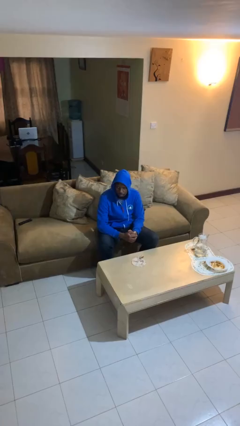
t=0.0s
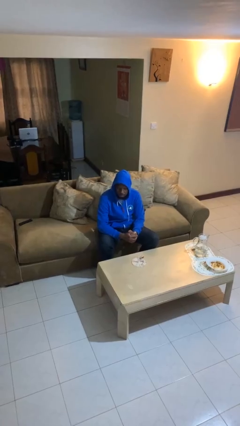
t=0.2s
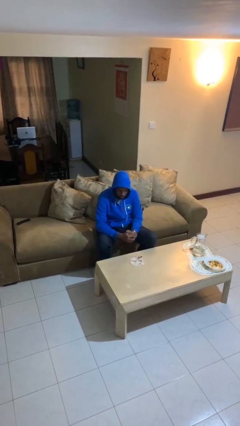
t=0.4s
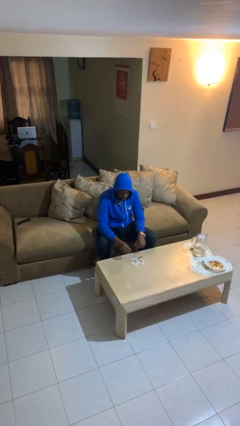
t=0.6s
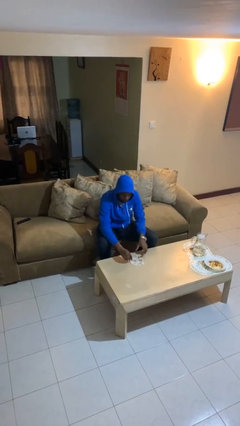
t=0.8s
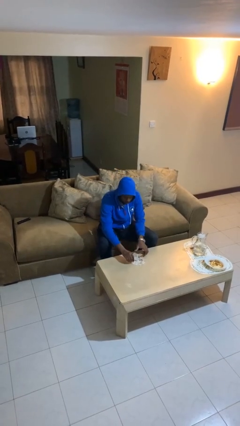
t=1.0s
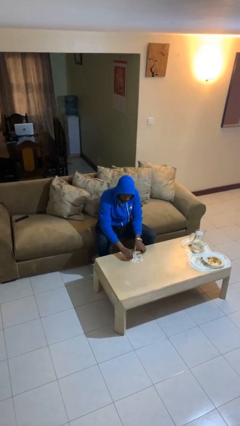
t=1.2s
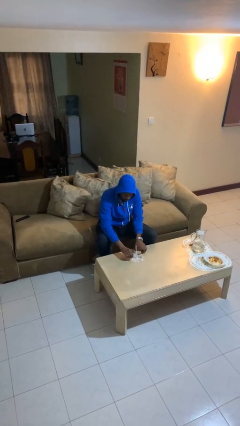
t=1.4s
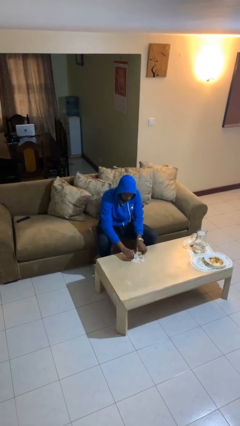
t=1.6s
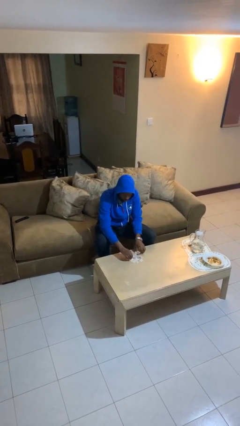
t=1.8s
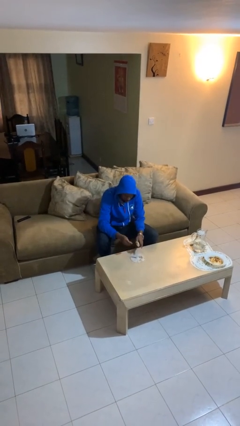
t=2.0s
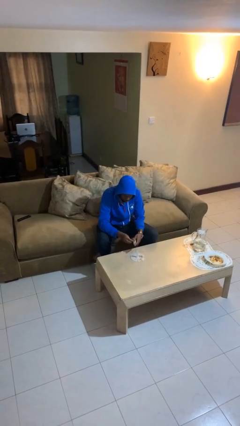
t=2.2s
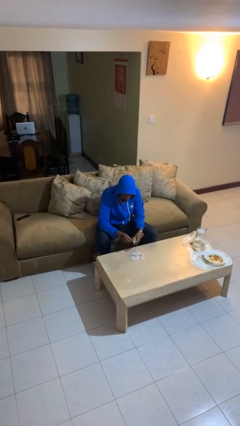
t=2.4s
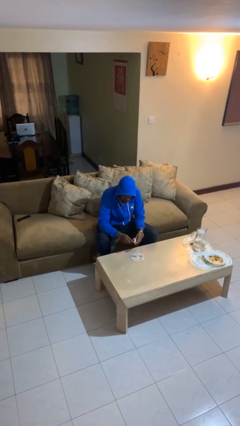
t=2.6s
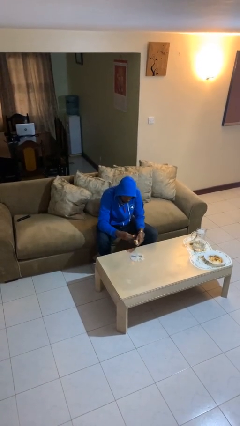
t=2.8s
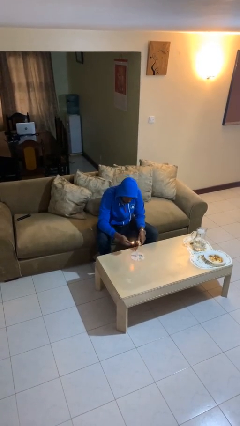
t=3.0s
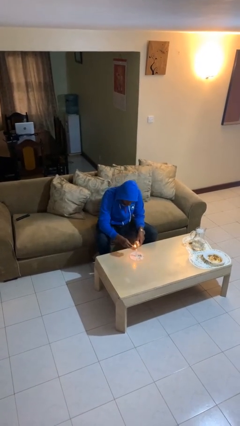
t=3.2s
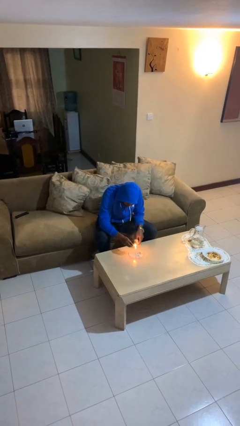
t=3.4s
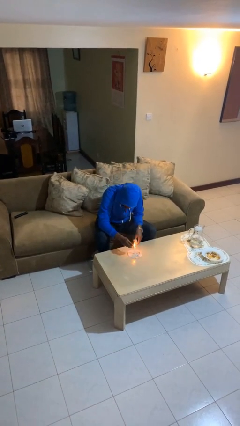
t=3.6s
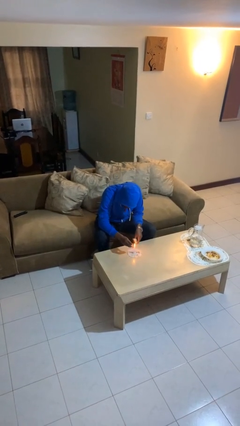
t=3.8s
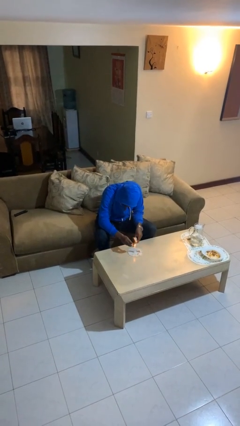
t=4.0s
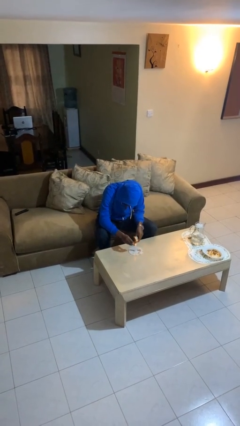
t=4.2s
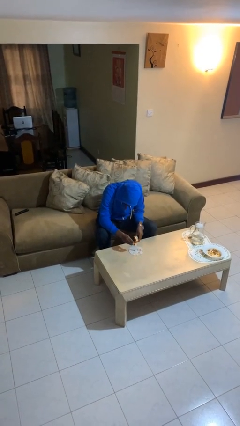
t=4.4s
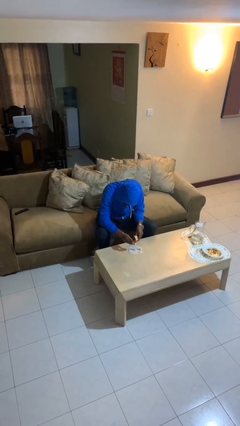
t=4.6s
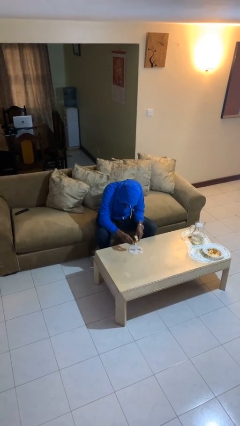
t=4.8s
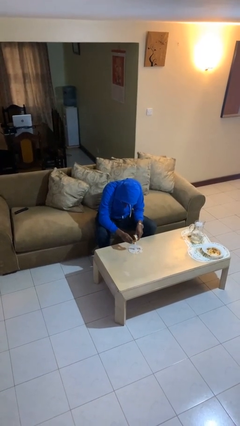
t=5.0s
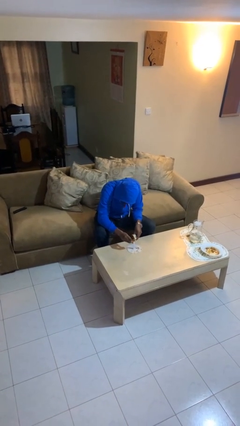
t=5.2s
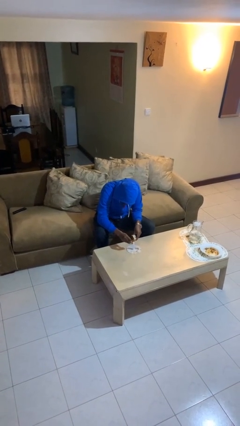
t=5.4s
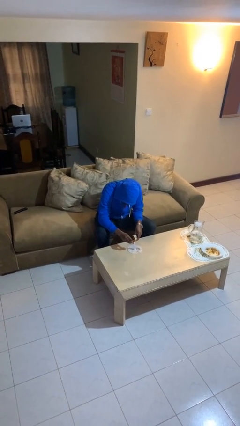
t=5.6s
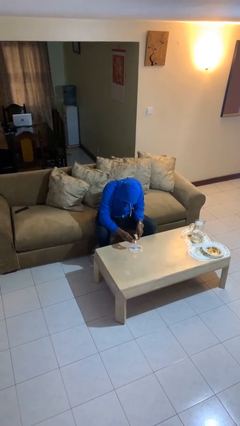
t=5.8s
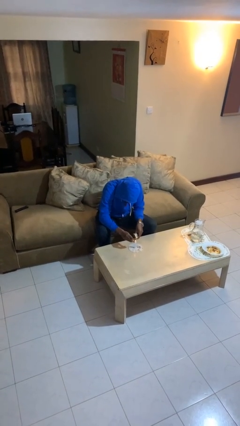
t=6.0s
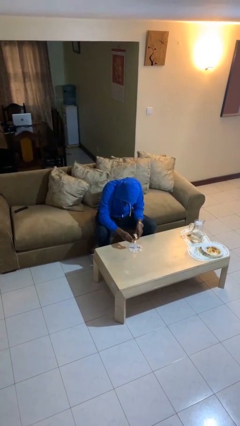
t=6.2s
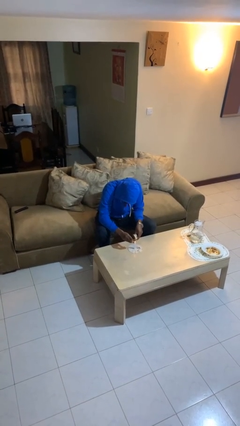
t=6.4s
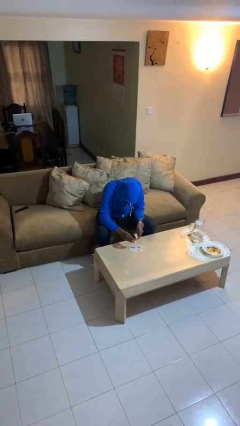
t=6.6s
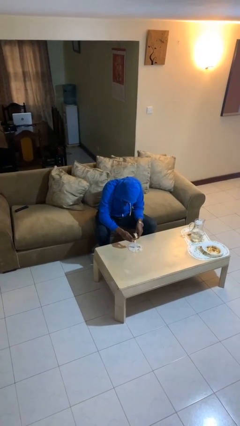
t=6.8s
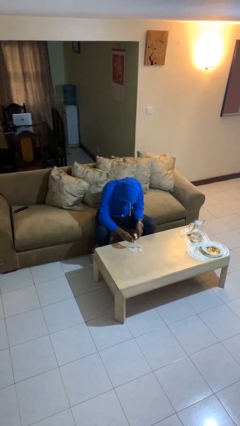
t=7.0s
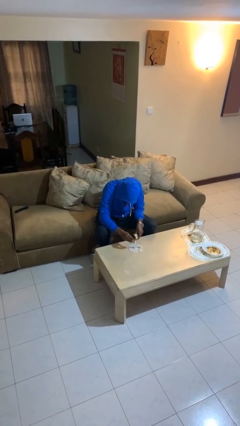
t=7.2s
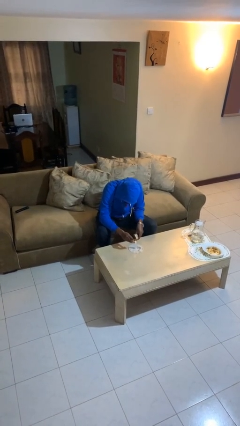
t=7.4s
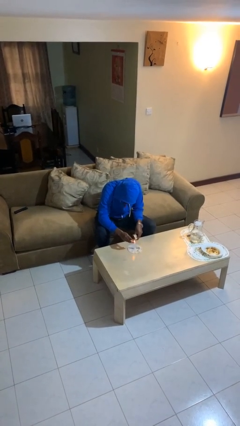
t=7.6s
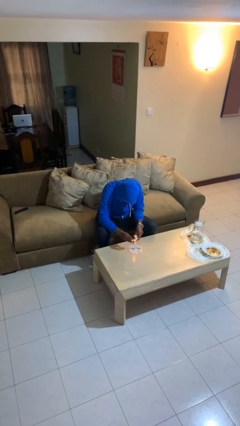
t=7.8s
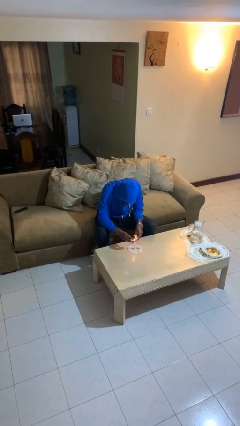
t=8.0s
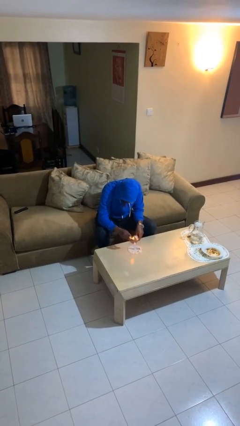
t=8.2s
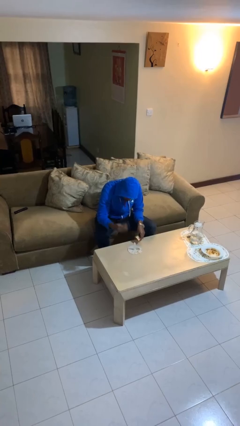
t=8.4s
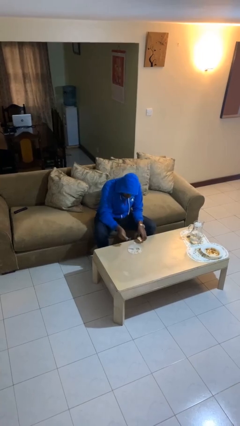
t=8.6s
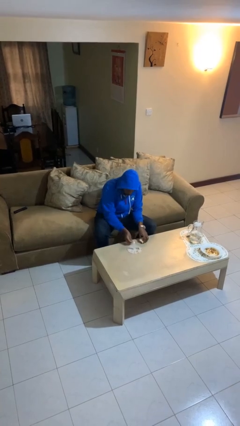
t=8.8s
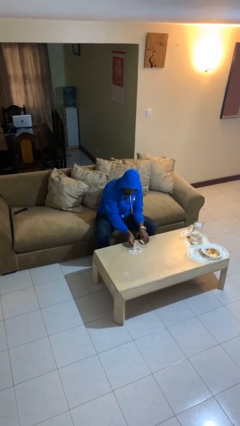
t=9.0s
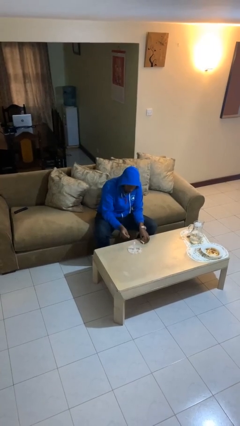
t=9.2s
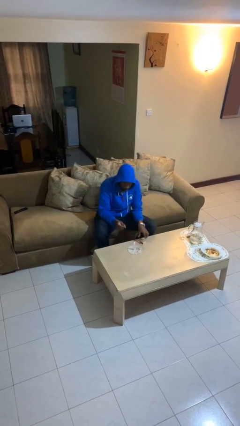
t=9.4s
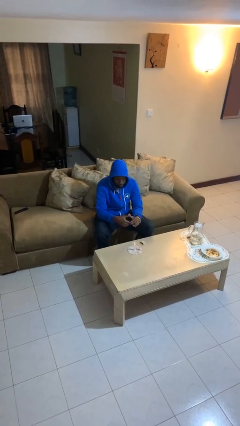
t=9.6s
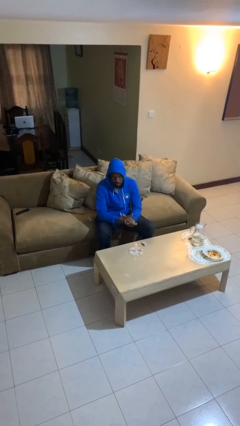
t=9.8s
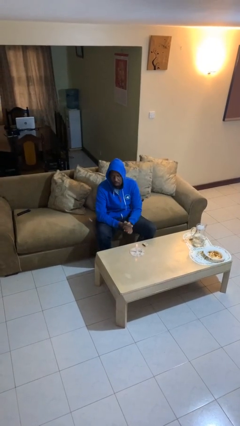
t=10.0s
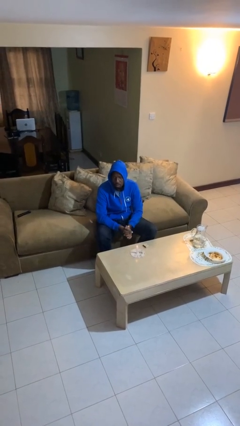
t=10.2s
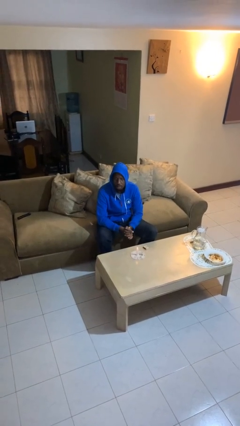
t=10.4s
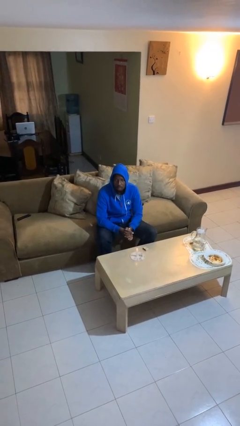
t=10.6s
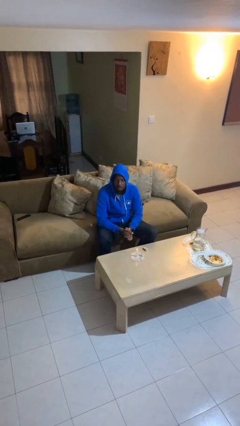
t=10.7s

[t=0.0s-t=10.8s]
person lights candle

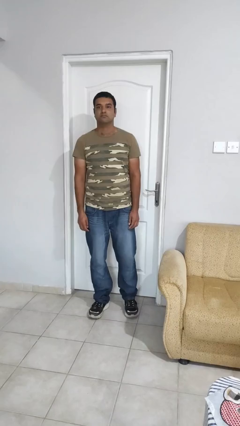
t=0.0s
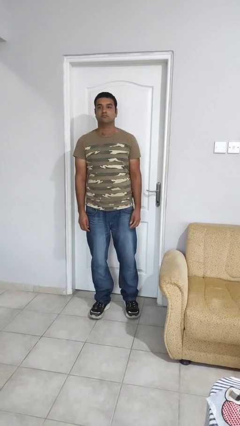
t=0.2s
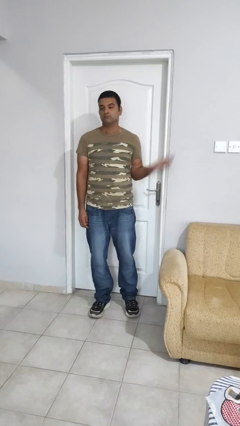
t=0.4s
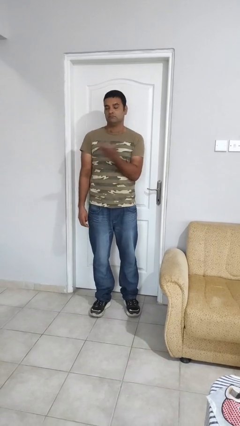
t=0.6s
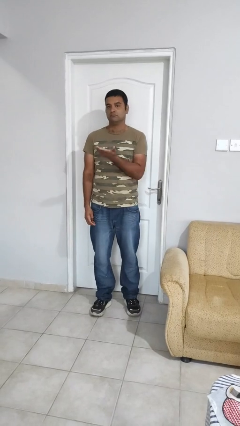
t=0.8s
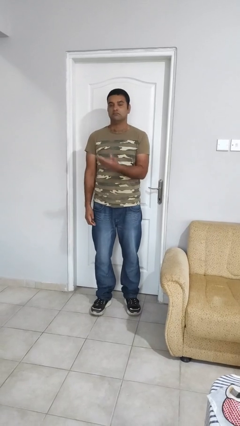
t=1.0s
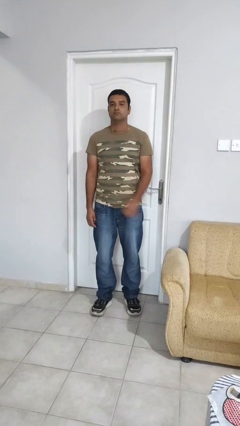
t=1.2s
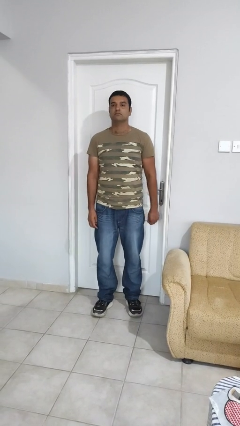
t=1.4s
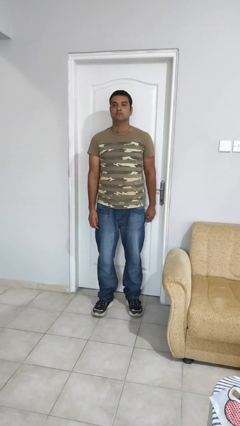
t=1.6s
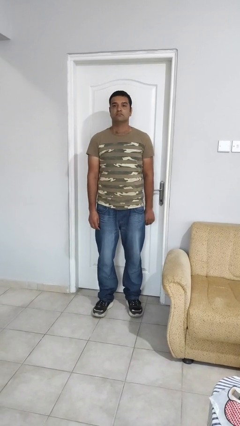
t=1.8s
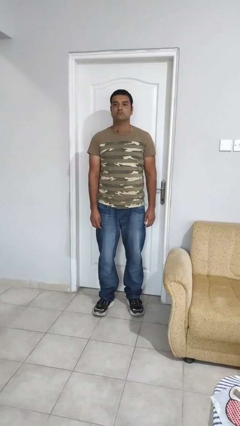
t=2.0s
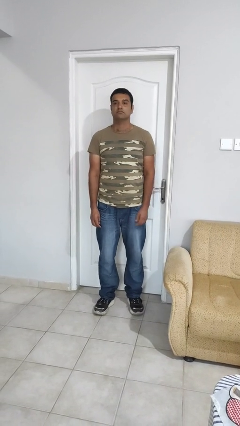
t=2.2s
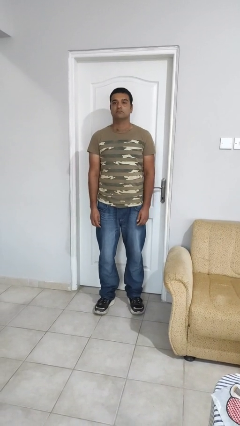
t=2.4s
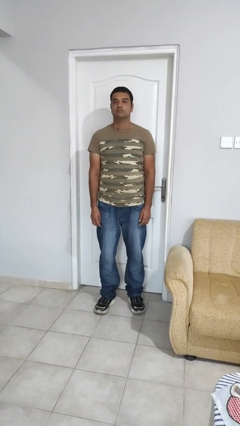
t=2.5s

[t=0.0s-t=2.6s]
person karate chop

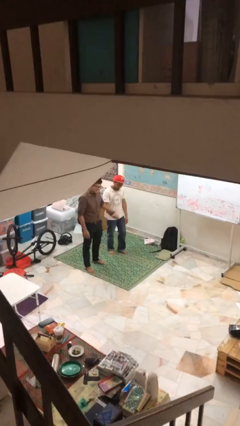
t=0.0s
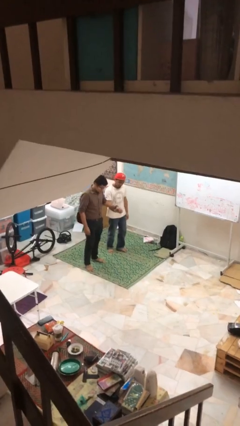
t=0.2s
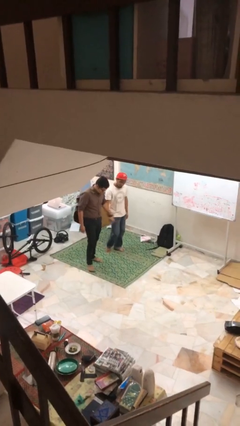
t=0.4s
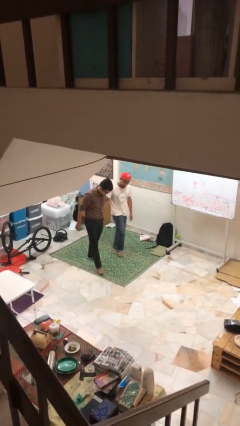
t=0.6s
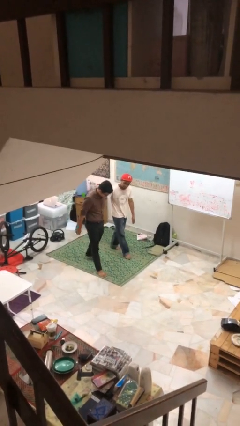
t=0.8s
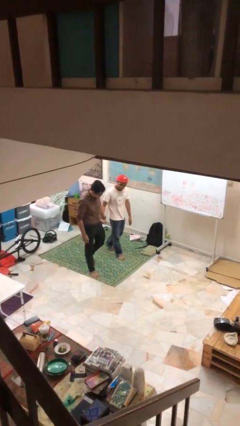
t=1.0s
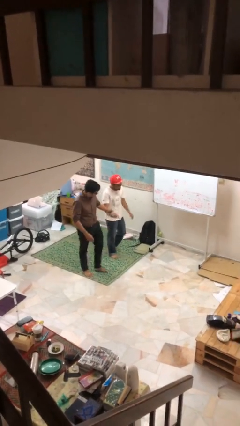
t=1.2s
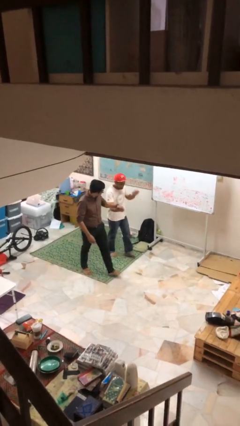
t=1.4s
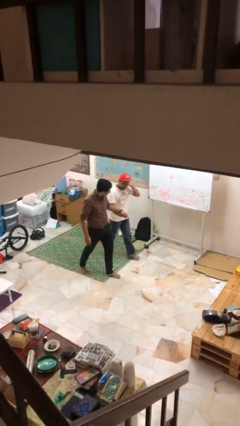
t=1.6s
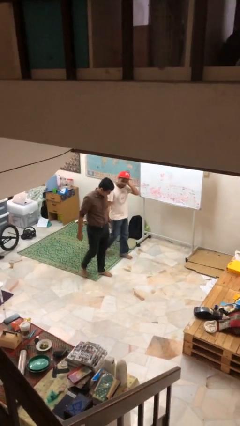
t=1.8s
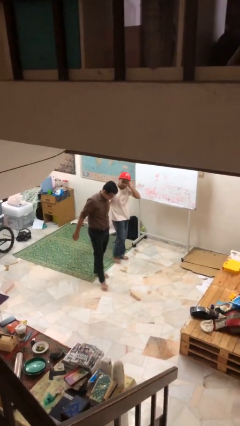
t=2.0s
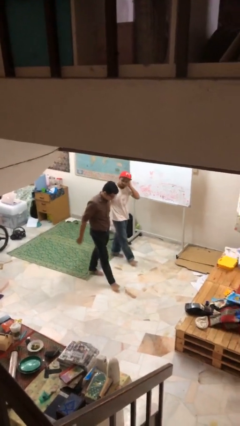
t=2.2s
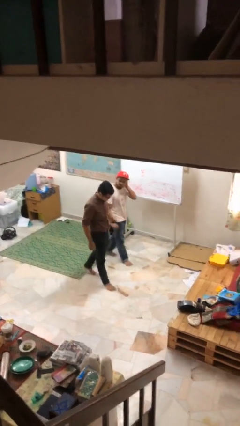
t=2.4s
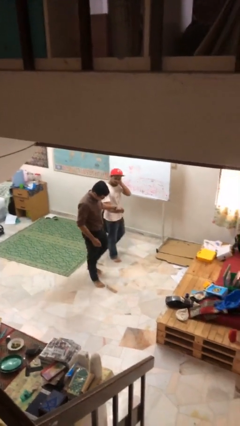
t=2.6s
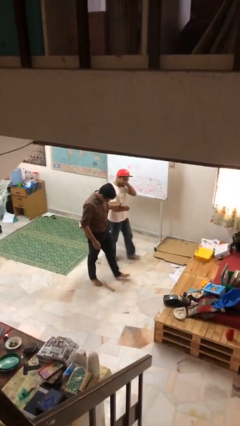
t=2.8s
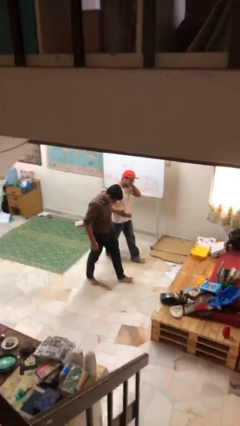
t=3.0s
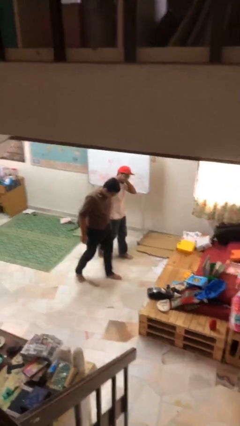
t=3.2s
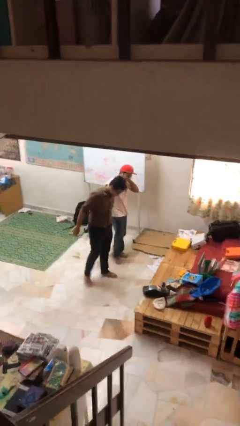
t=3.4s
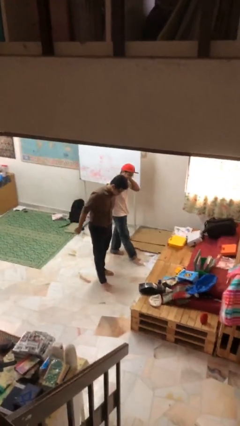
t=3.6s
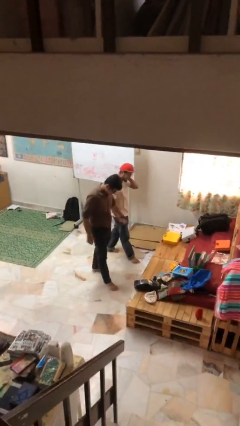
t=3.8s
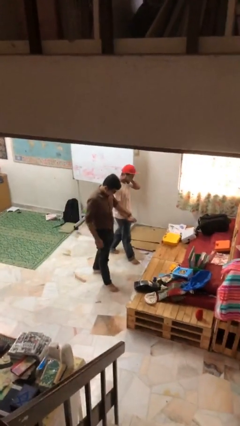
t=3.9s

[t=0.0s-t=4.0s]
person holds hand

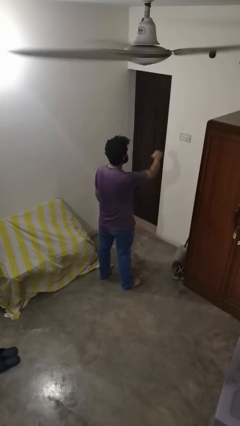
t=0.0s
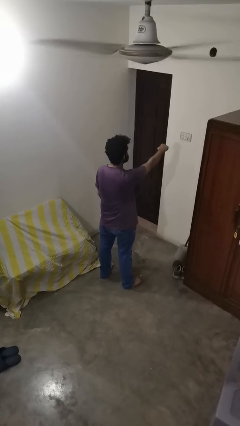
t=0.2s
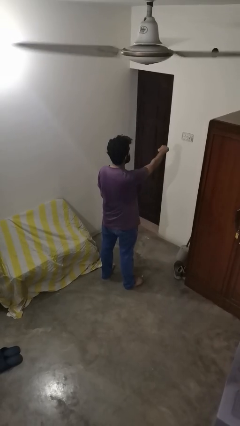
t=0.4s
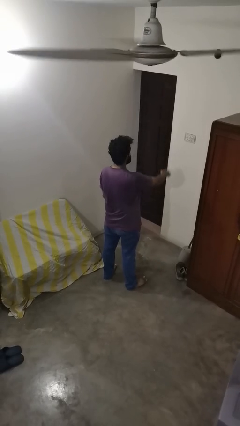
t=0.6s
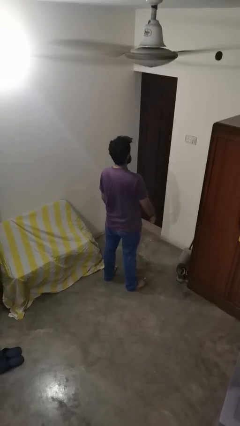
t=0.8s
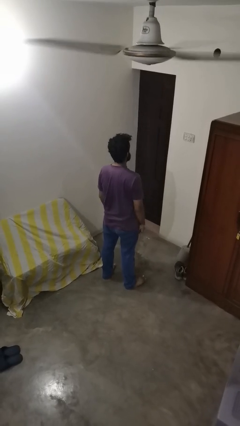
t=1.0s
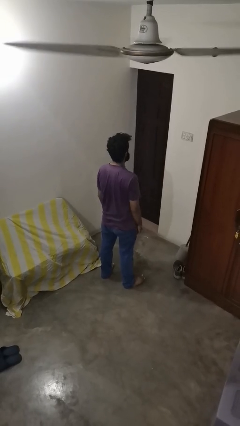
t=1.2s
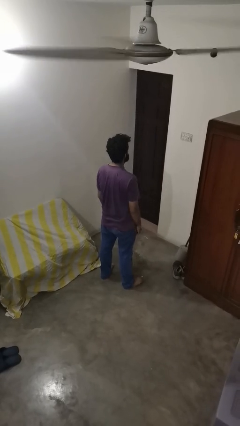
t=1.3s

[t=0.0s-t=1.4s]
person punches
